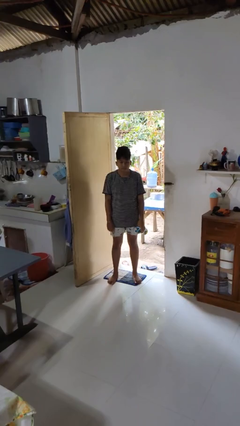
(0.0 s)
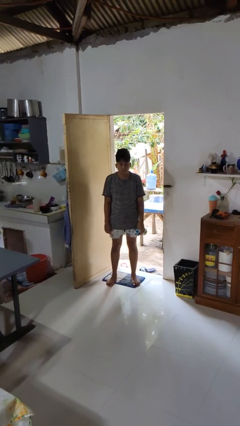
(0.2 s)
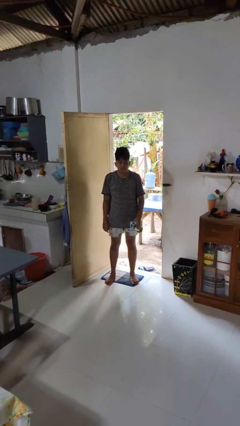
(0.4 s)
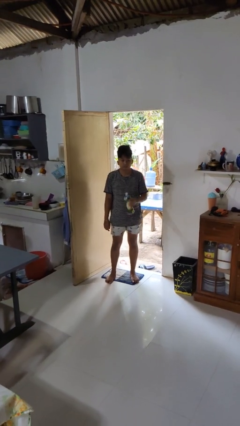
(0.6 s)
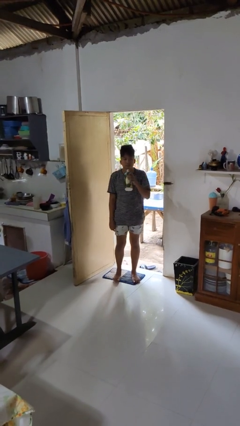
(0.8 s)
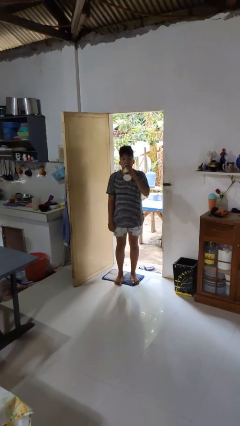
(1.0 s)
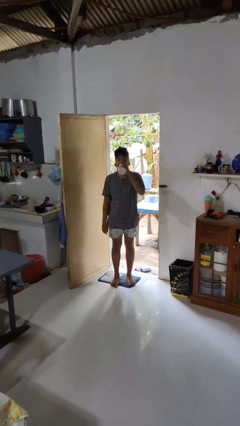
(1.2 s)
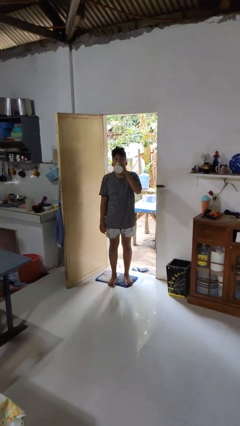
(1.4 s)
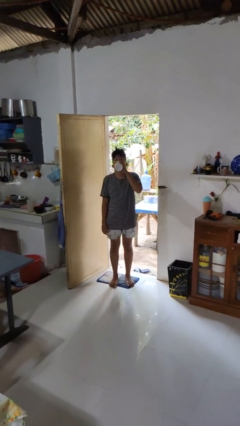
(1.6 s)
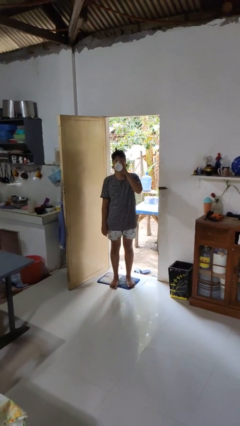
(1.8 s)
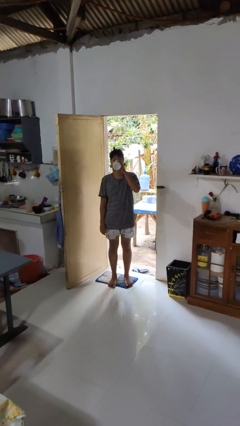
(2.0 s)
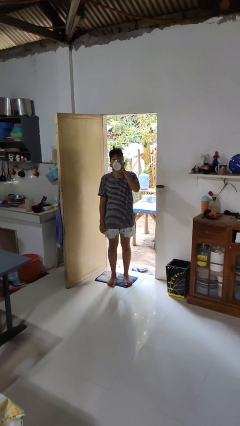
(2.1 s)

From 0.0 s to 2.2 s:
person drinks from bottle

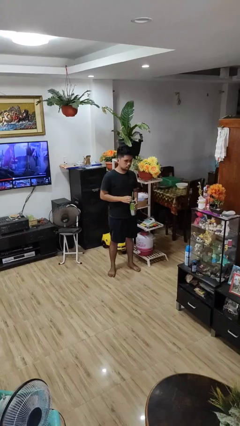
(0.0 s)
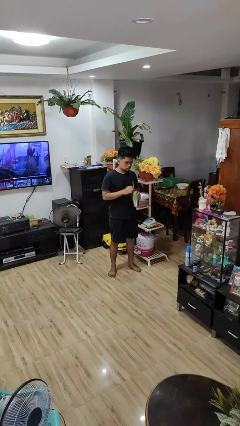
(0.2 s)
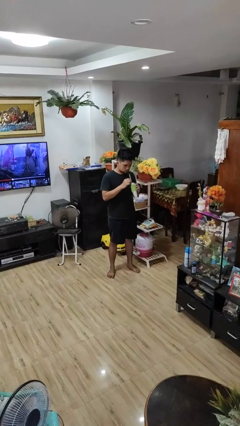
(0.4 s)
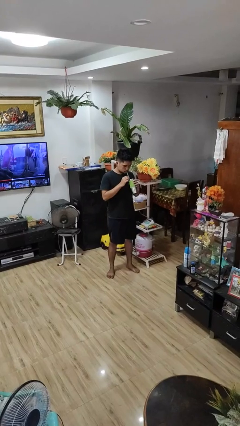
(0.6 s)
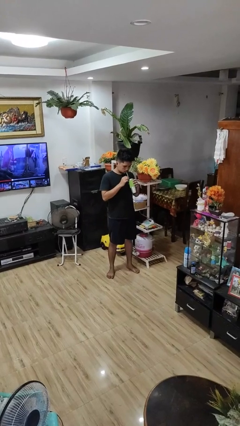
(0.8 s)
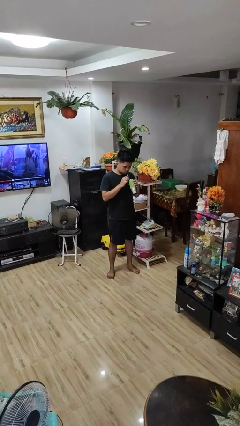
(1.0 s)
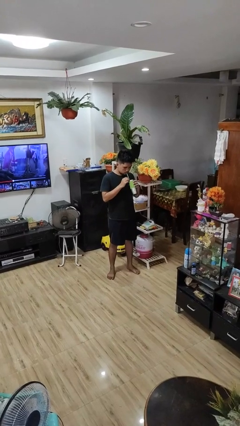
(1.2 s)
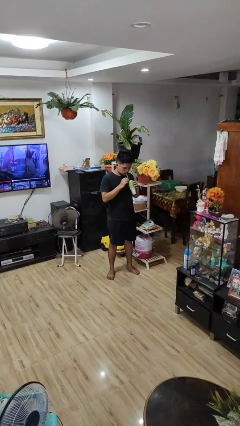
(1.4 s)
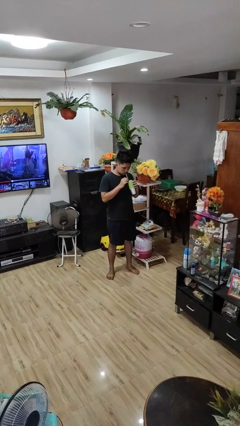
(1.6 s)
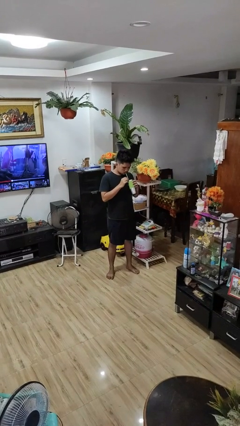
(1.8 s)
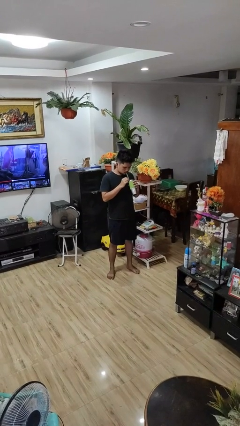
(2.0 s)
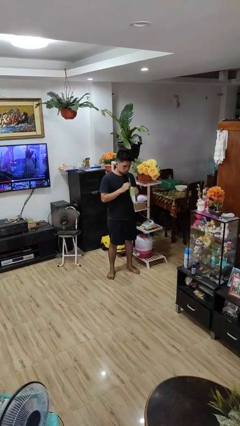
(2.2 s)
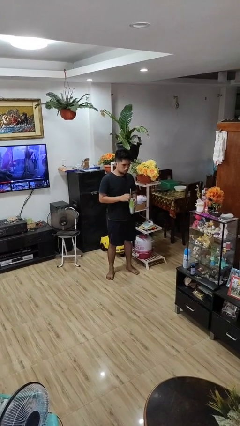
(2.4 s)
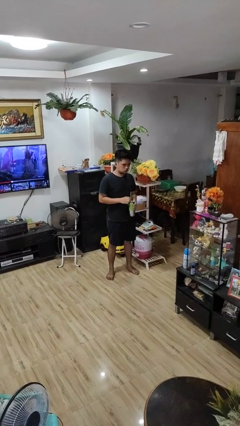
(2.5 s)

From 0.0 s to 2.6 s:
person drinks from straw

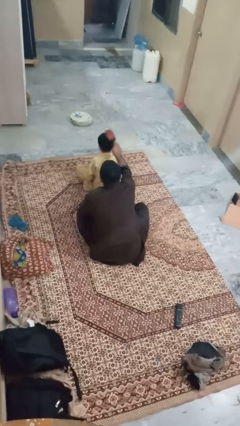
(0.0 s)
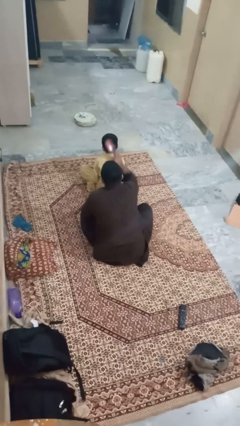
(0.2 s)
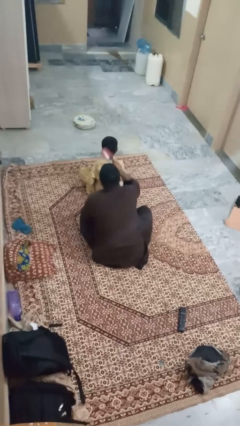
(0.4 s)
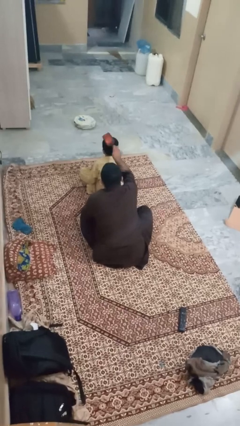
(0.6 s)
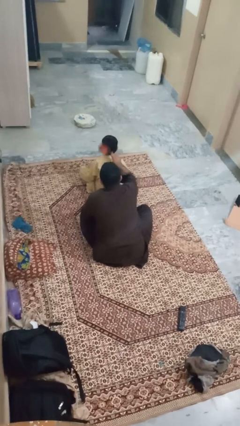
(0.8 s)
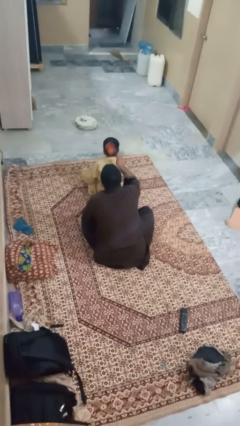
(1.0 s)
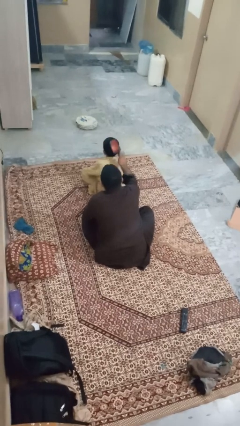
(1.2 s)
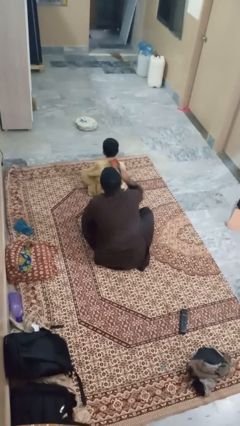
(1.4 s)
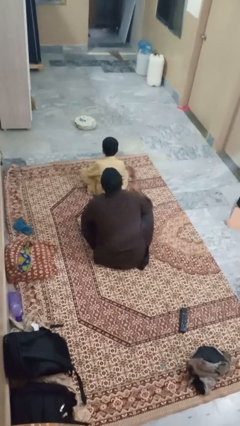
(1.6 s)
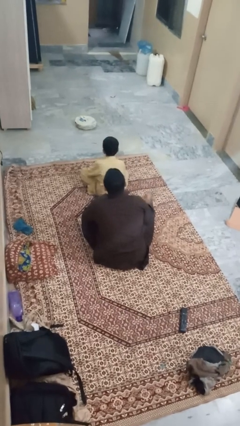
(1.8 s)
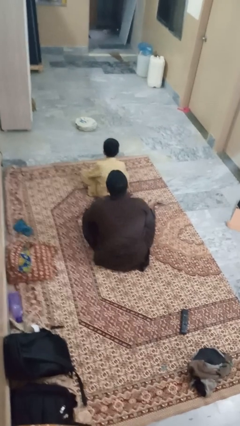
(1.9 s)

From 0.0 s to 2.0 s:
person brushes hair of person

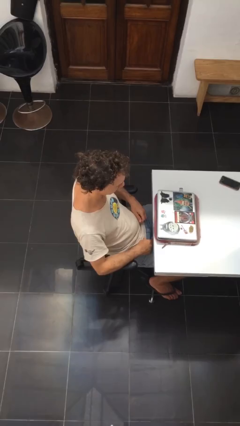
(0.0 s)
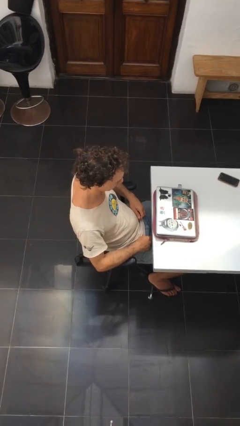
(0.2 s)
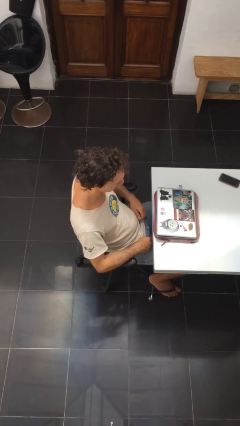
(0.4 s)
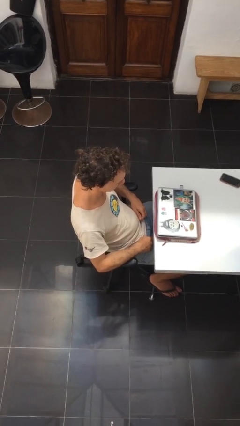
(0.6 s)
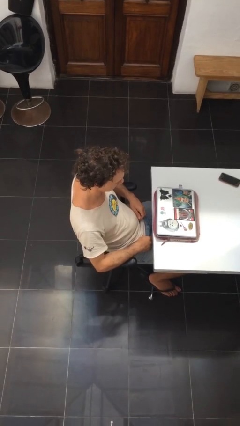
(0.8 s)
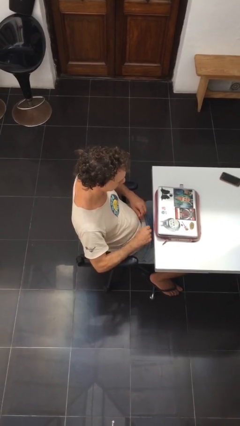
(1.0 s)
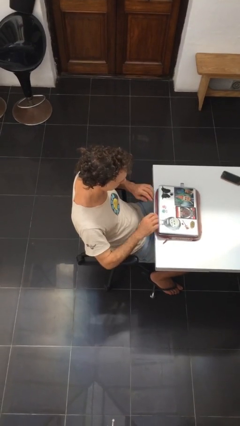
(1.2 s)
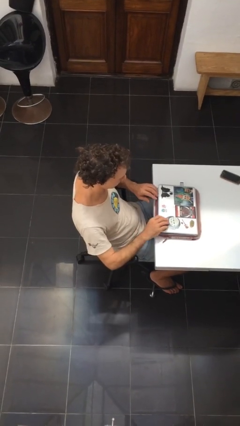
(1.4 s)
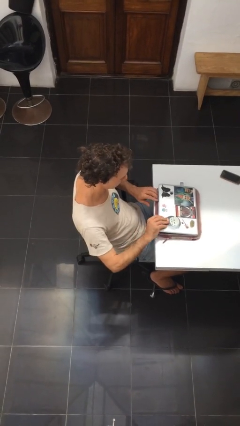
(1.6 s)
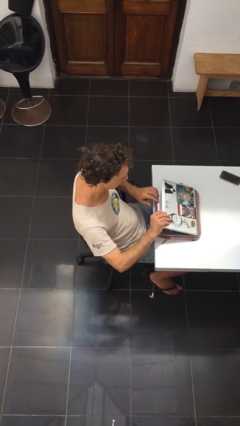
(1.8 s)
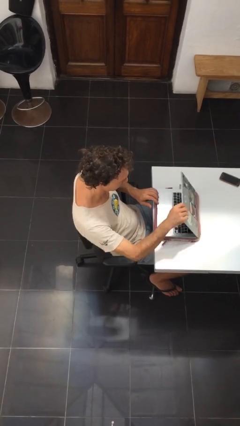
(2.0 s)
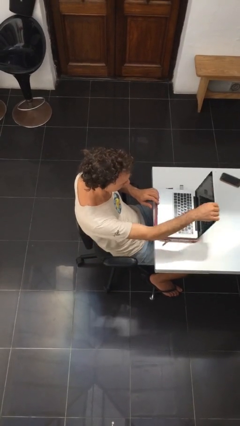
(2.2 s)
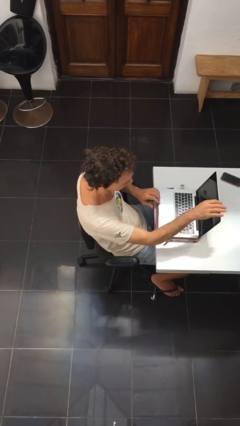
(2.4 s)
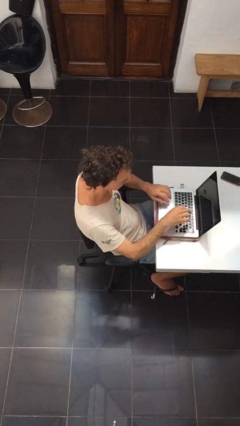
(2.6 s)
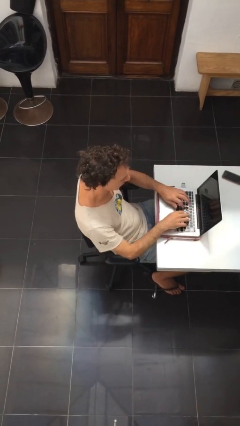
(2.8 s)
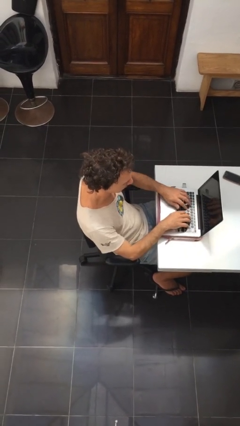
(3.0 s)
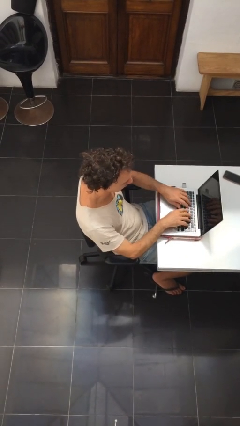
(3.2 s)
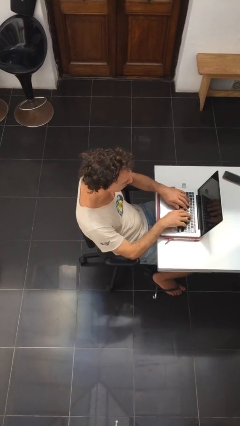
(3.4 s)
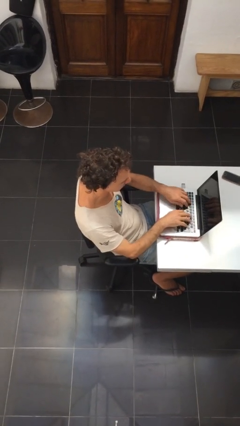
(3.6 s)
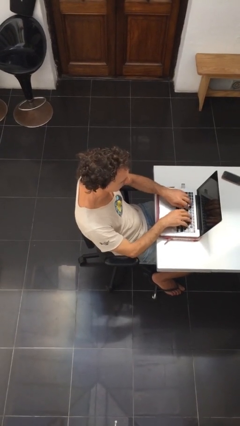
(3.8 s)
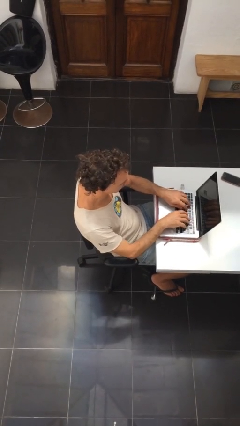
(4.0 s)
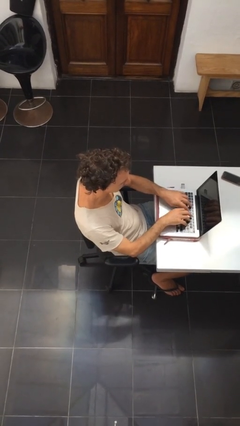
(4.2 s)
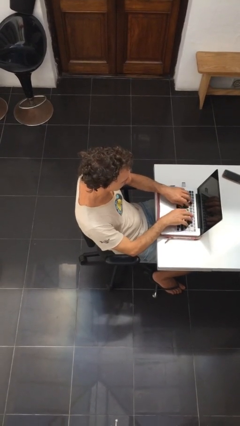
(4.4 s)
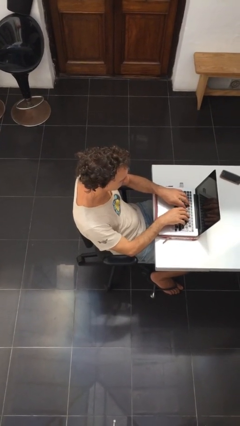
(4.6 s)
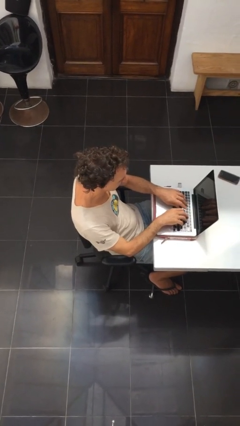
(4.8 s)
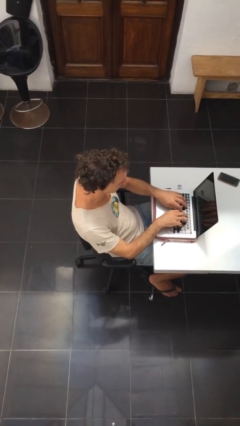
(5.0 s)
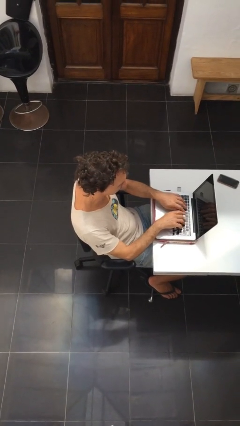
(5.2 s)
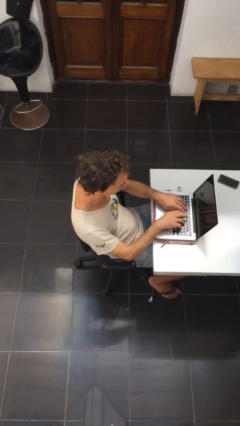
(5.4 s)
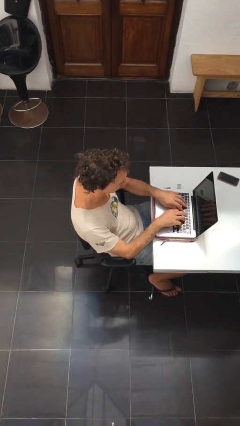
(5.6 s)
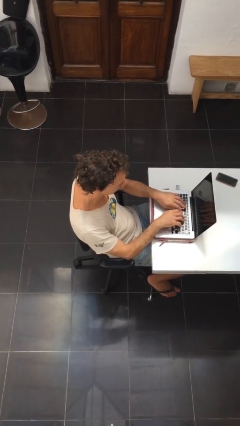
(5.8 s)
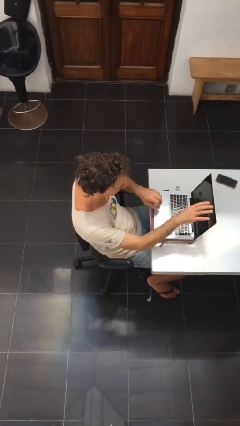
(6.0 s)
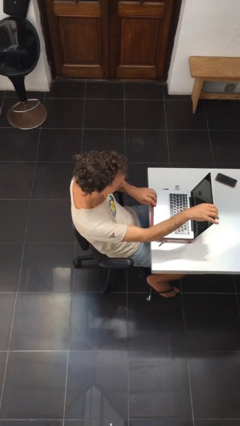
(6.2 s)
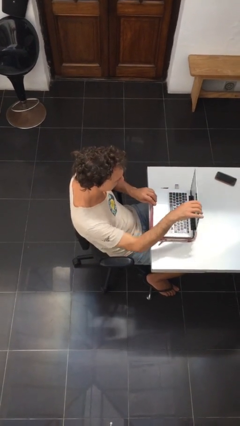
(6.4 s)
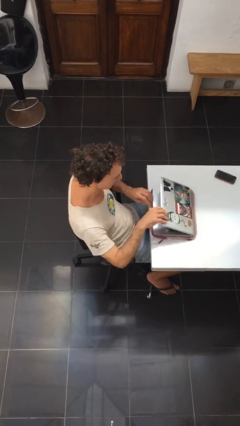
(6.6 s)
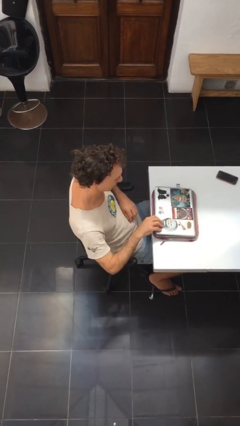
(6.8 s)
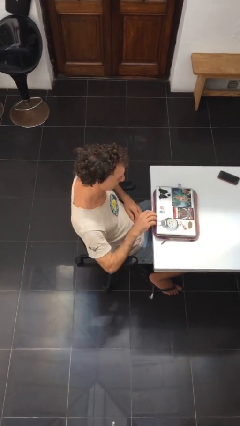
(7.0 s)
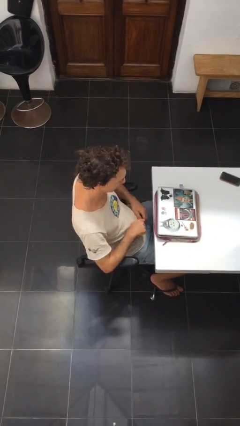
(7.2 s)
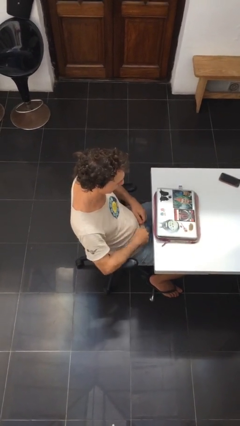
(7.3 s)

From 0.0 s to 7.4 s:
person interacts with laptop

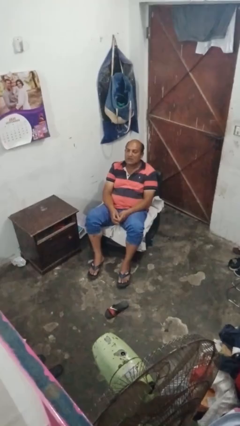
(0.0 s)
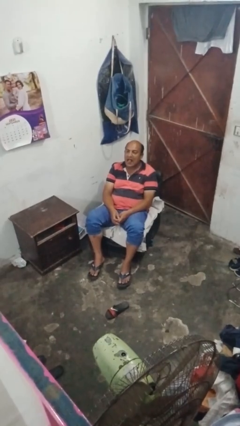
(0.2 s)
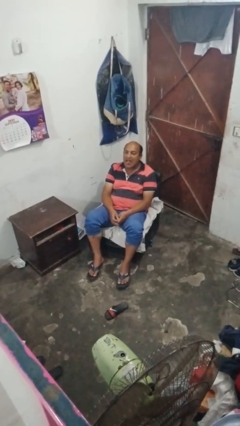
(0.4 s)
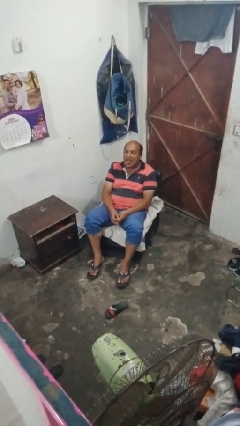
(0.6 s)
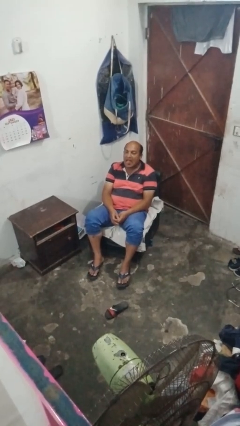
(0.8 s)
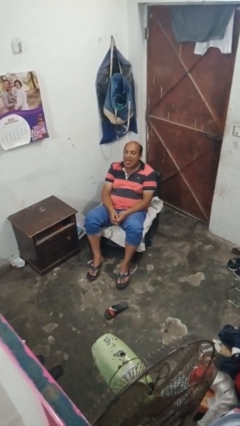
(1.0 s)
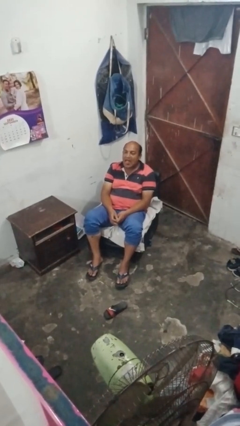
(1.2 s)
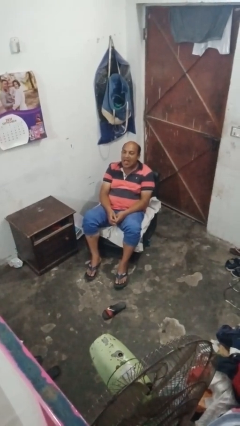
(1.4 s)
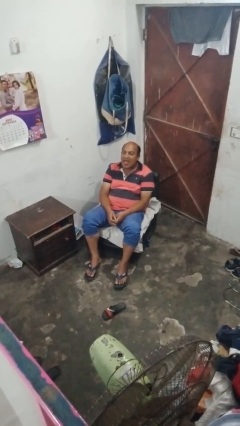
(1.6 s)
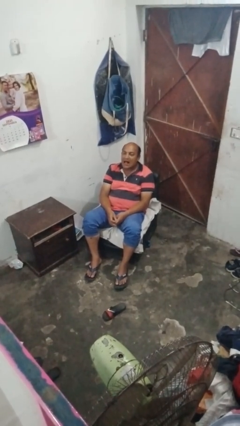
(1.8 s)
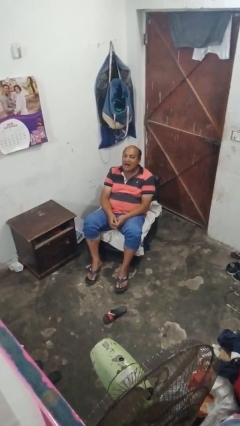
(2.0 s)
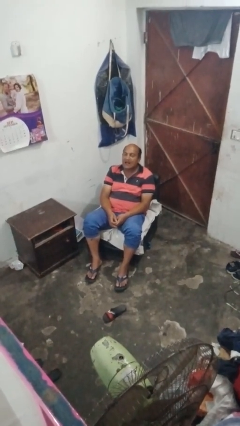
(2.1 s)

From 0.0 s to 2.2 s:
person sticks out tongue

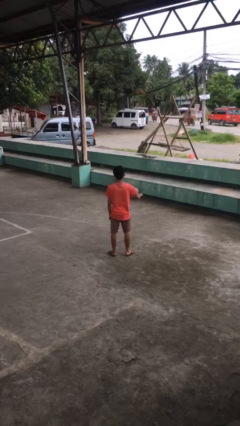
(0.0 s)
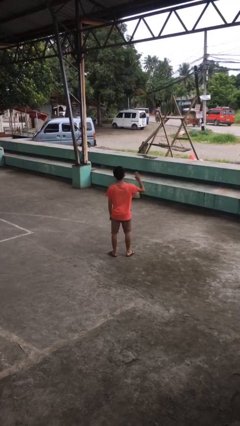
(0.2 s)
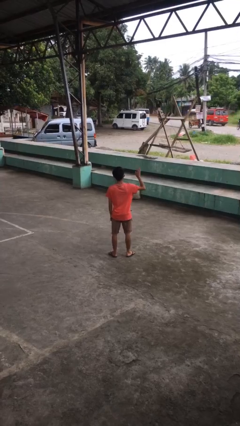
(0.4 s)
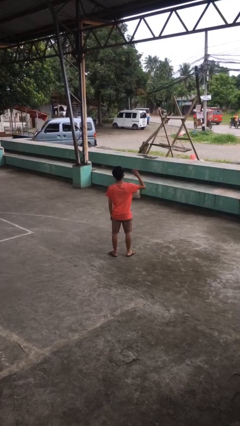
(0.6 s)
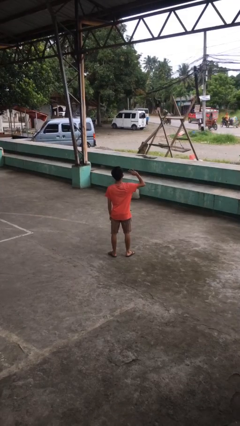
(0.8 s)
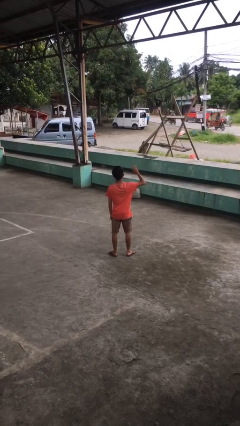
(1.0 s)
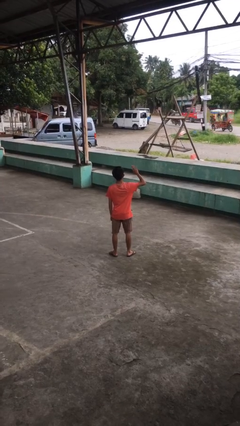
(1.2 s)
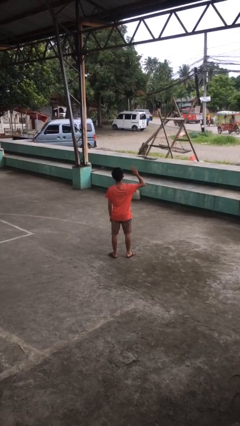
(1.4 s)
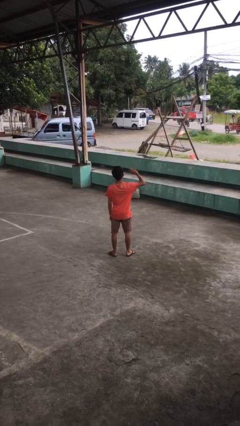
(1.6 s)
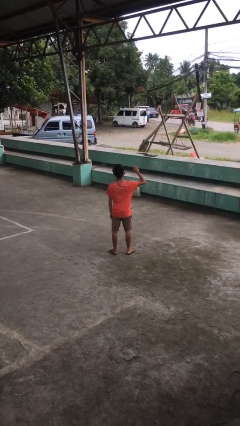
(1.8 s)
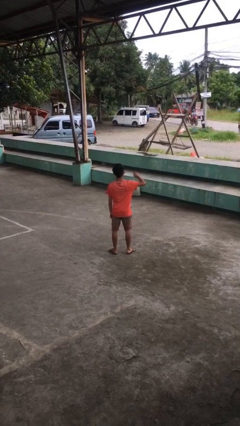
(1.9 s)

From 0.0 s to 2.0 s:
person waves at person
